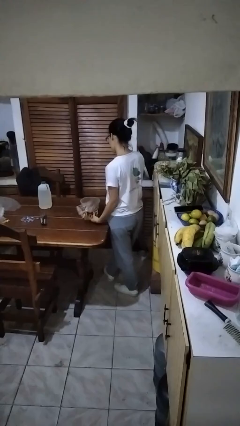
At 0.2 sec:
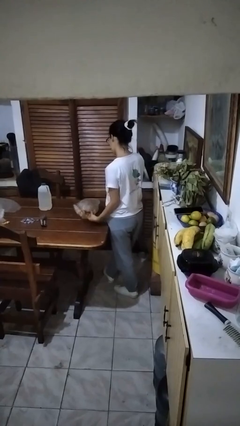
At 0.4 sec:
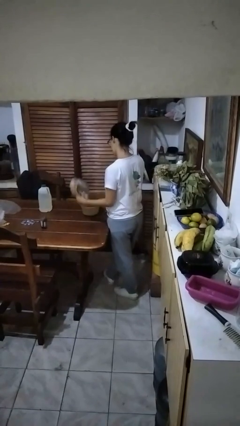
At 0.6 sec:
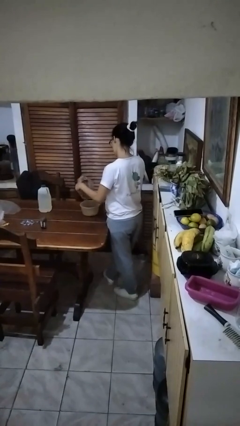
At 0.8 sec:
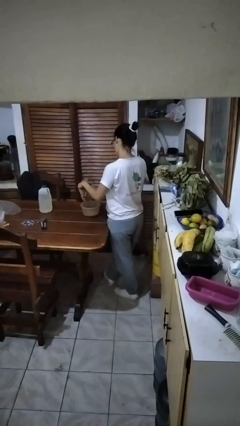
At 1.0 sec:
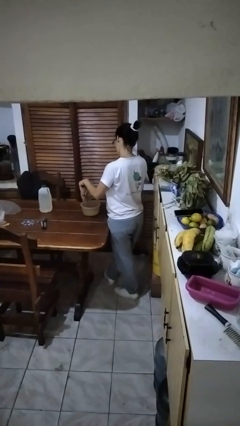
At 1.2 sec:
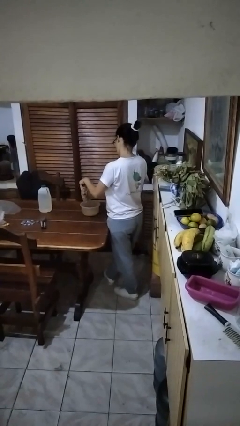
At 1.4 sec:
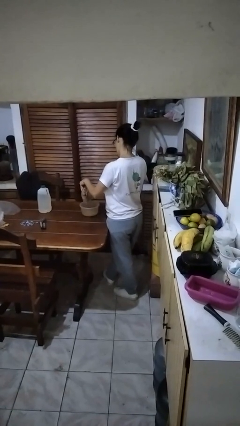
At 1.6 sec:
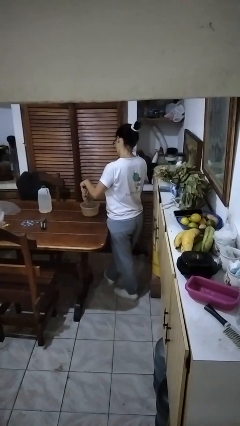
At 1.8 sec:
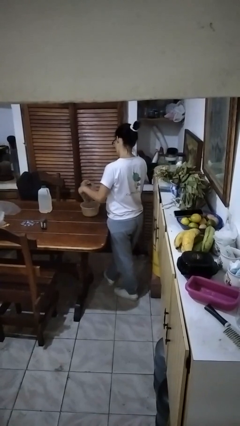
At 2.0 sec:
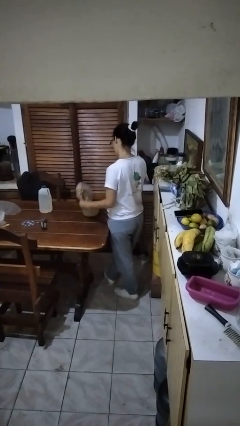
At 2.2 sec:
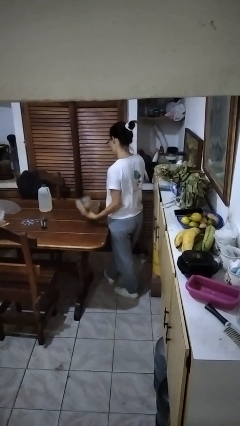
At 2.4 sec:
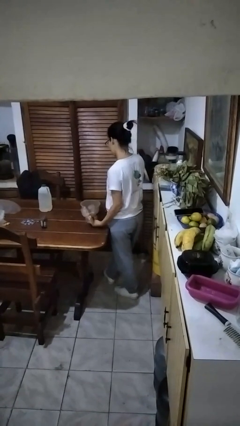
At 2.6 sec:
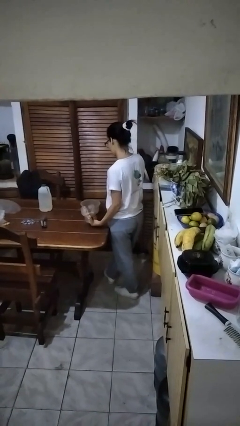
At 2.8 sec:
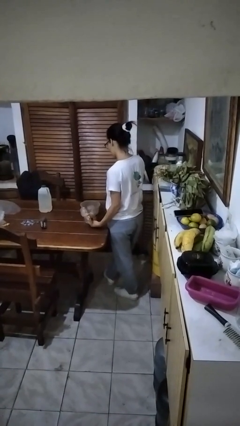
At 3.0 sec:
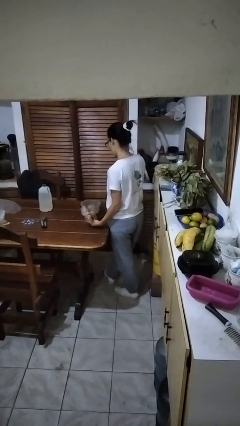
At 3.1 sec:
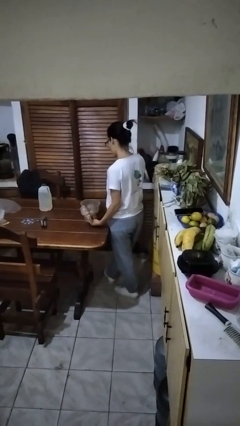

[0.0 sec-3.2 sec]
person pours into bowl

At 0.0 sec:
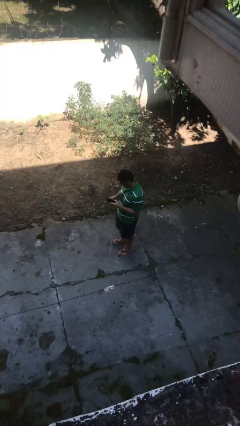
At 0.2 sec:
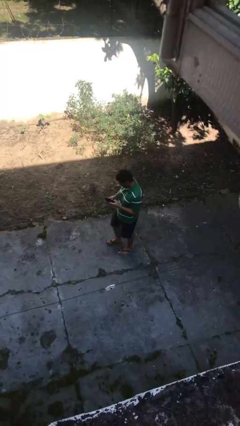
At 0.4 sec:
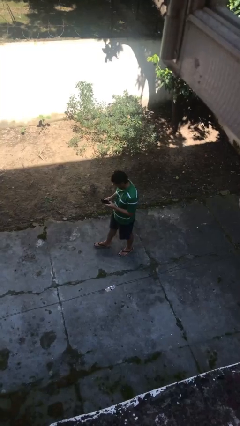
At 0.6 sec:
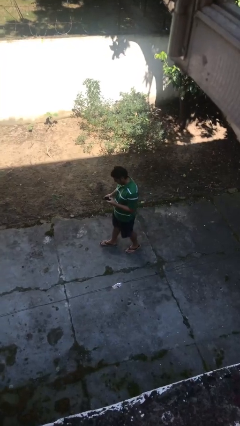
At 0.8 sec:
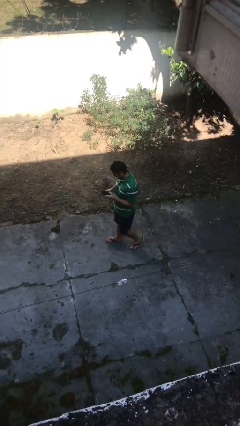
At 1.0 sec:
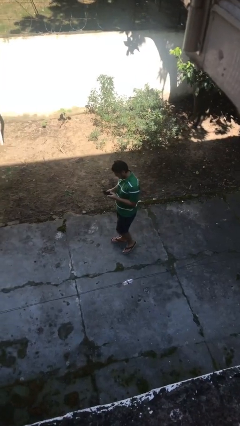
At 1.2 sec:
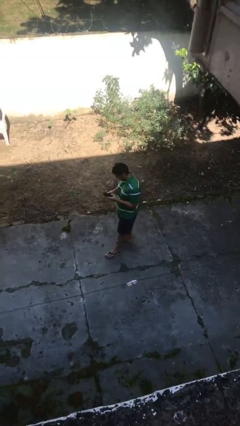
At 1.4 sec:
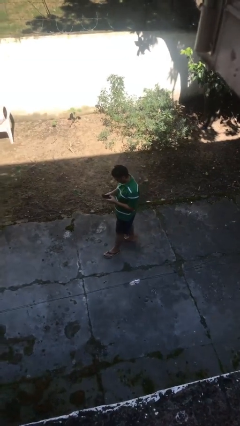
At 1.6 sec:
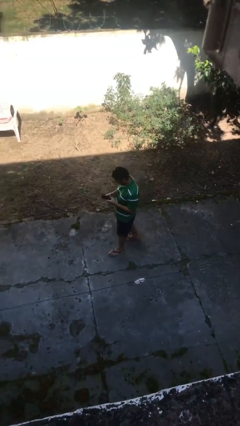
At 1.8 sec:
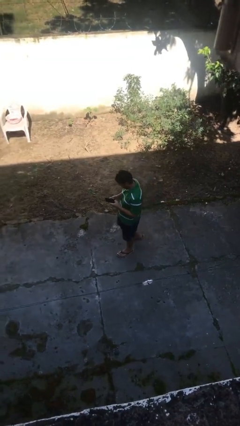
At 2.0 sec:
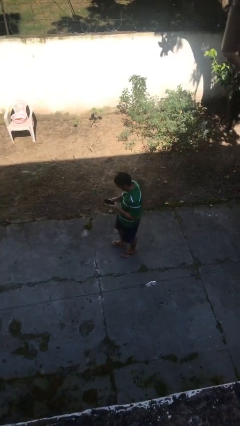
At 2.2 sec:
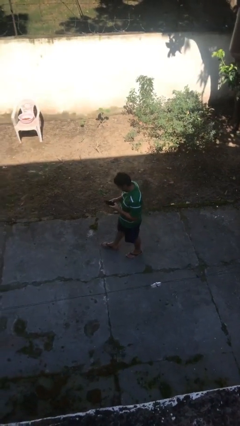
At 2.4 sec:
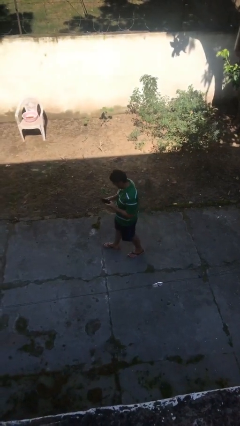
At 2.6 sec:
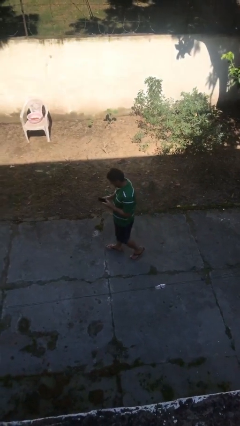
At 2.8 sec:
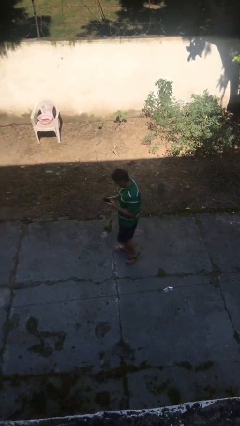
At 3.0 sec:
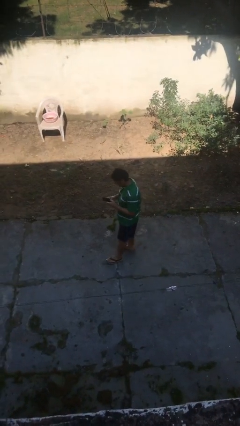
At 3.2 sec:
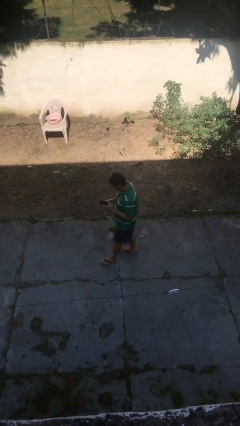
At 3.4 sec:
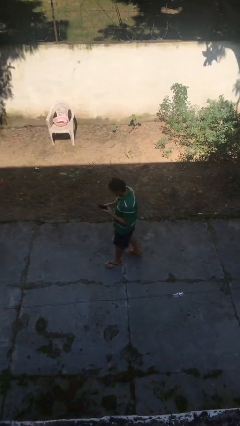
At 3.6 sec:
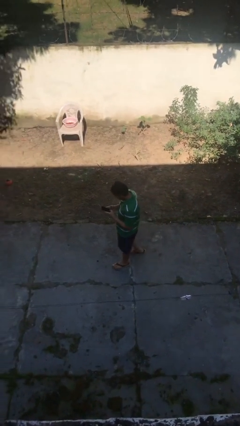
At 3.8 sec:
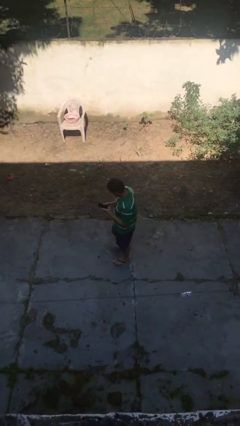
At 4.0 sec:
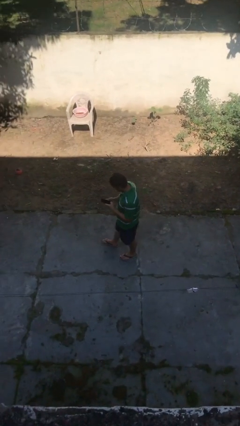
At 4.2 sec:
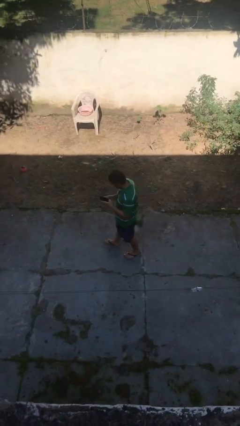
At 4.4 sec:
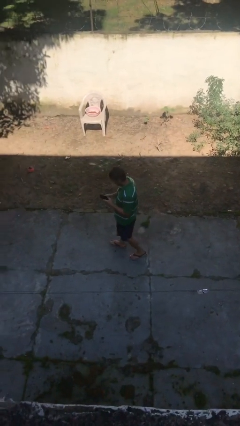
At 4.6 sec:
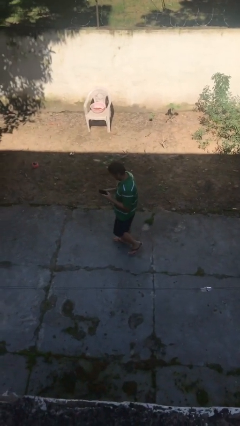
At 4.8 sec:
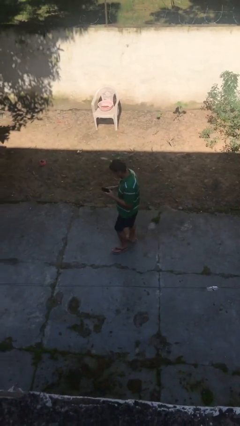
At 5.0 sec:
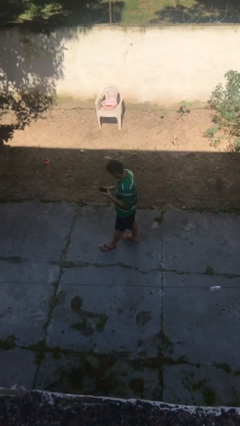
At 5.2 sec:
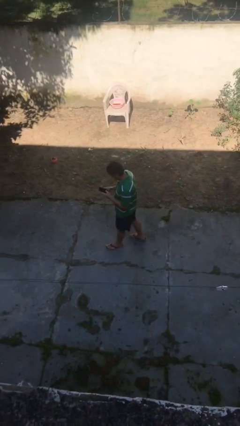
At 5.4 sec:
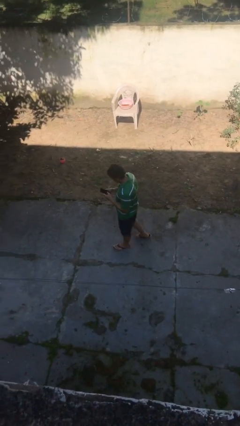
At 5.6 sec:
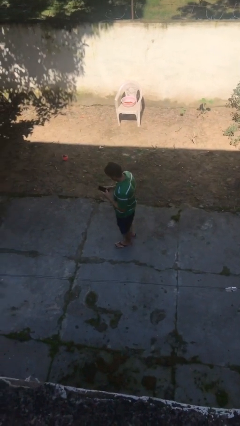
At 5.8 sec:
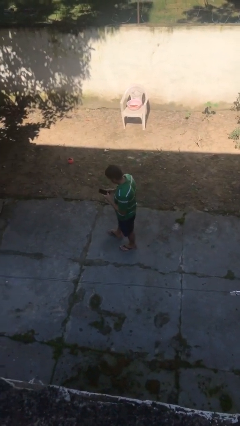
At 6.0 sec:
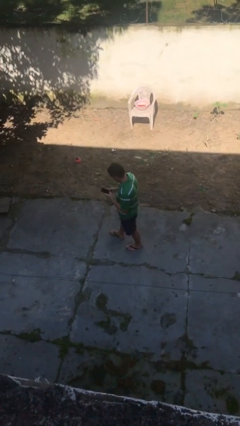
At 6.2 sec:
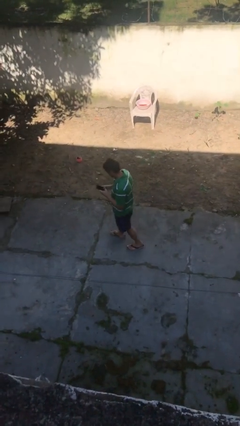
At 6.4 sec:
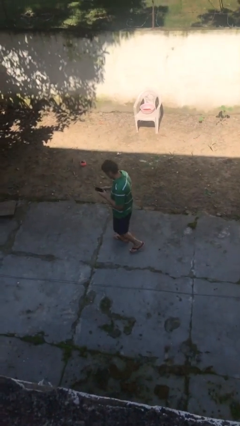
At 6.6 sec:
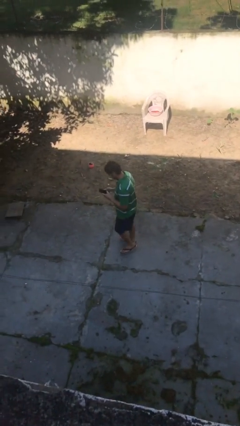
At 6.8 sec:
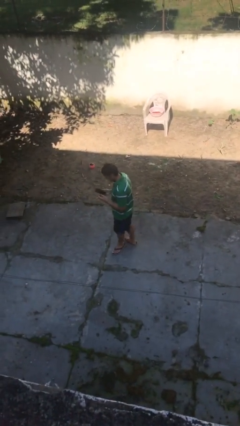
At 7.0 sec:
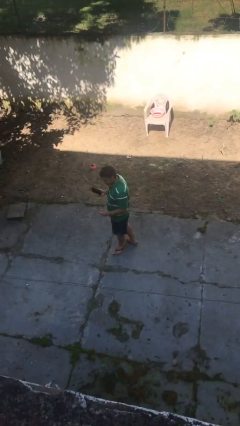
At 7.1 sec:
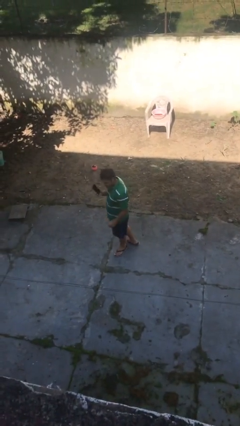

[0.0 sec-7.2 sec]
person texts on phone

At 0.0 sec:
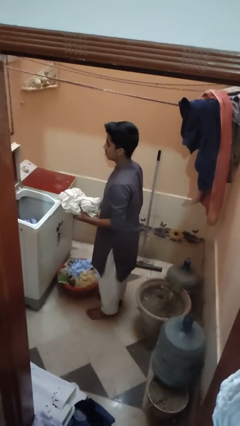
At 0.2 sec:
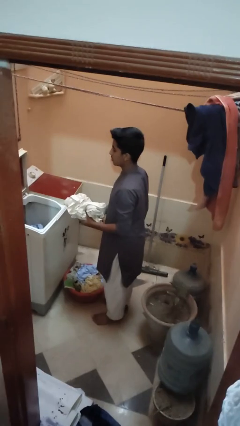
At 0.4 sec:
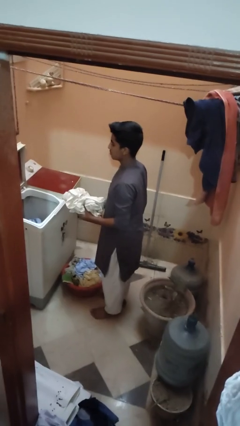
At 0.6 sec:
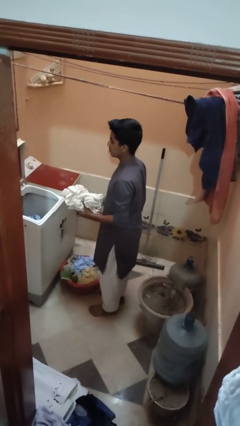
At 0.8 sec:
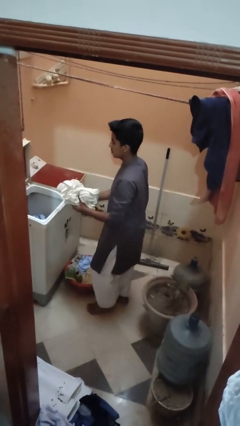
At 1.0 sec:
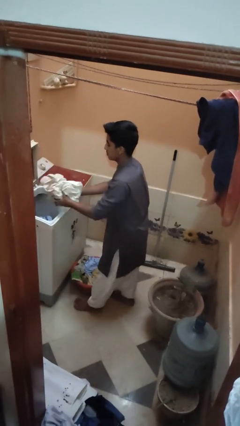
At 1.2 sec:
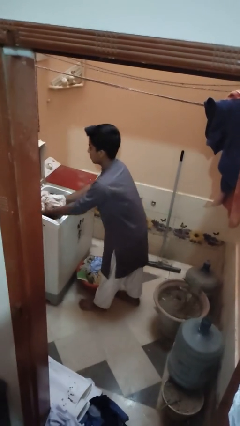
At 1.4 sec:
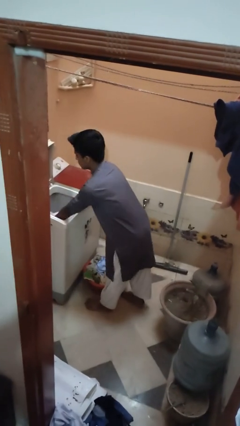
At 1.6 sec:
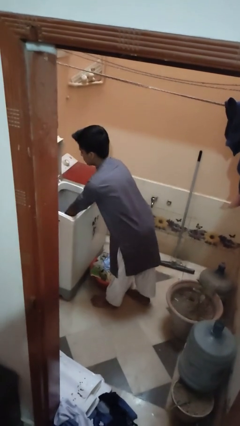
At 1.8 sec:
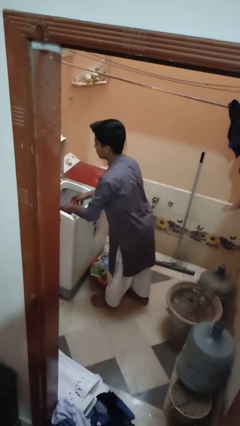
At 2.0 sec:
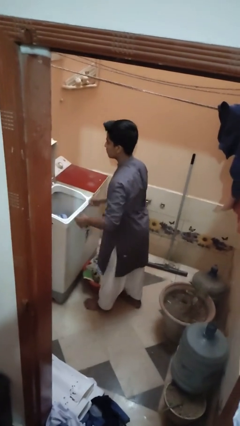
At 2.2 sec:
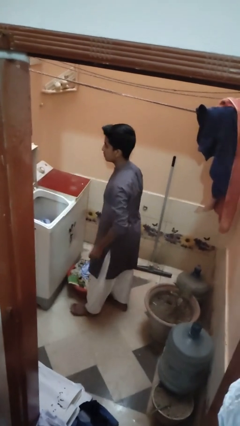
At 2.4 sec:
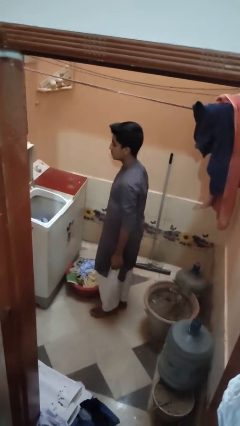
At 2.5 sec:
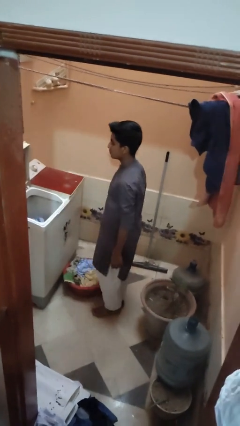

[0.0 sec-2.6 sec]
person loads clotheswasher

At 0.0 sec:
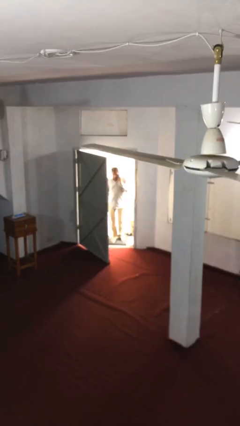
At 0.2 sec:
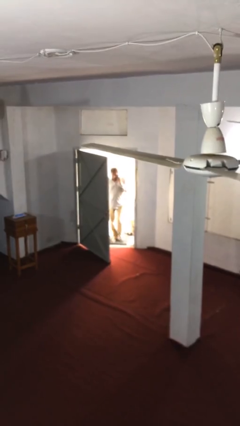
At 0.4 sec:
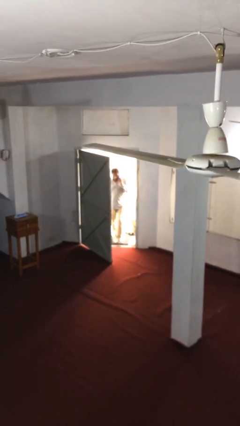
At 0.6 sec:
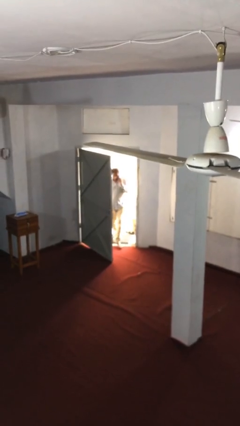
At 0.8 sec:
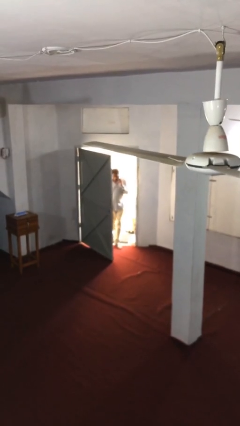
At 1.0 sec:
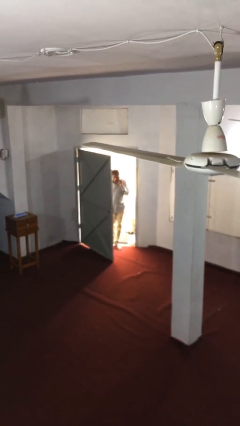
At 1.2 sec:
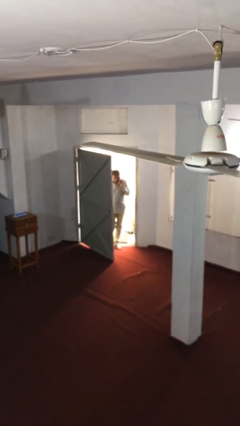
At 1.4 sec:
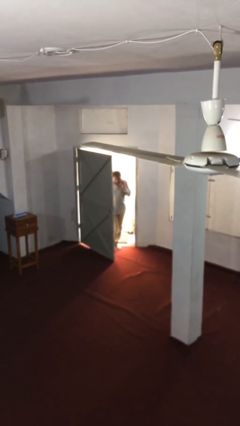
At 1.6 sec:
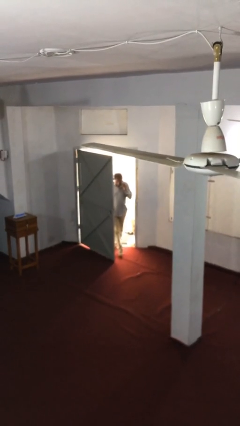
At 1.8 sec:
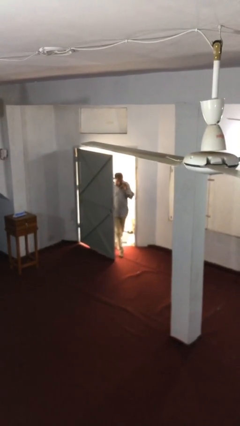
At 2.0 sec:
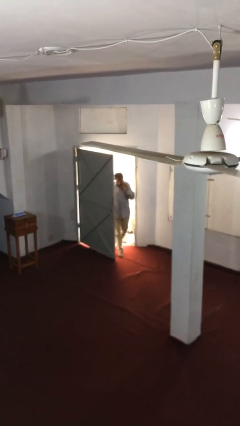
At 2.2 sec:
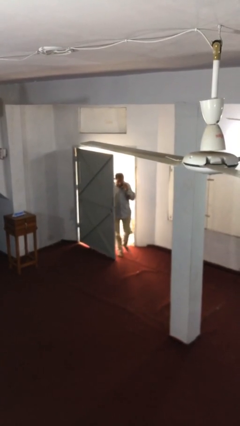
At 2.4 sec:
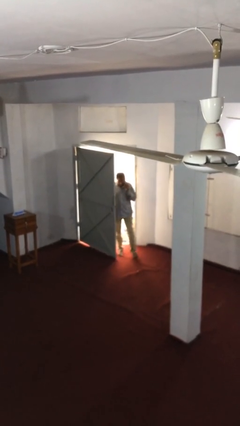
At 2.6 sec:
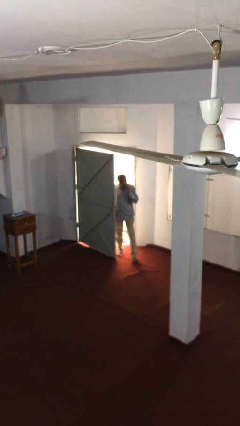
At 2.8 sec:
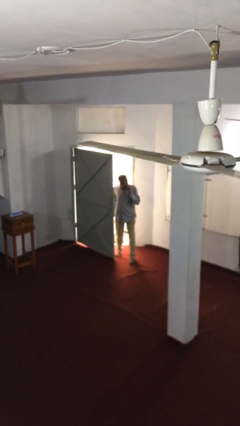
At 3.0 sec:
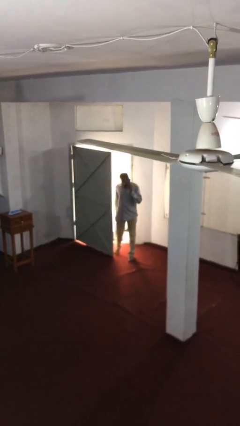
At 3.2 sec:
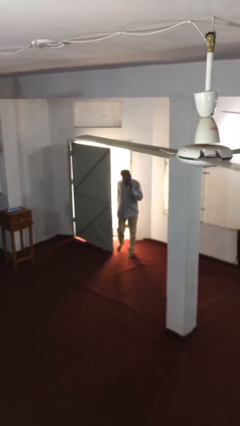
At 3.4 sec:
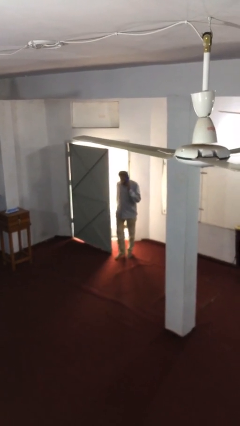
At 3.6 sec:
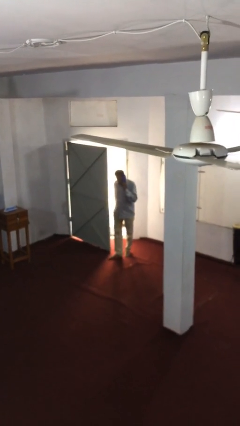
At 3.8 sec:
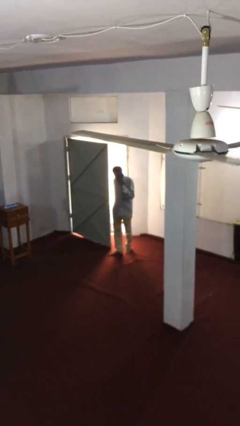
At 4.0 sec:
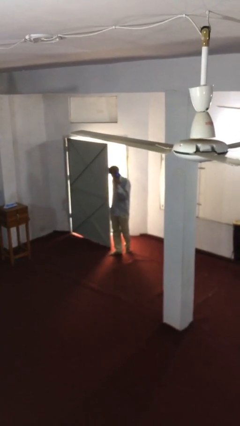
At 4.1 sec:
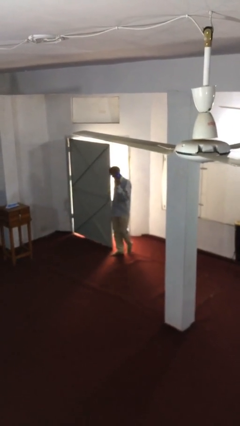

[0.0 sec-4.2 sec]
person enters scene through structure

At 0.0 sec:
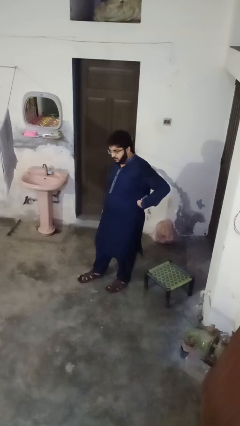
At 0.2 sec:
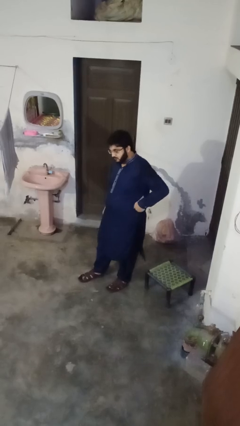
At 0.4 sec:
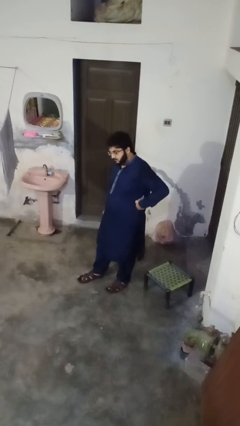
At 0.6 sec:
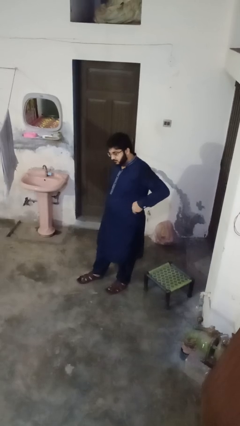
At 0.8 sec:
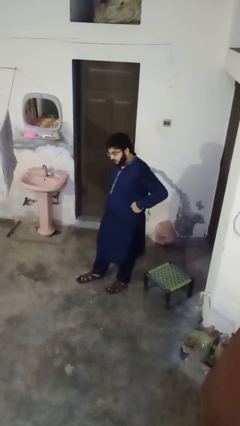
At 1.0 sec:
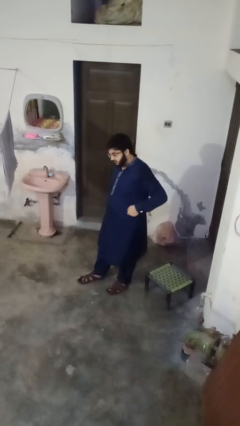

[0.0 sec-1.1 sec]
person puts phone into pocket
